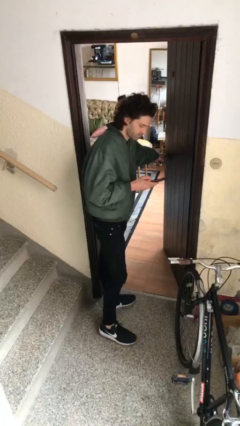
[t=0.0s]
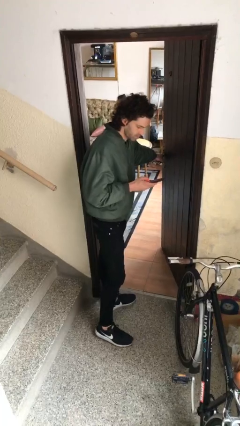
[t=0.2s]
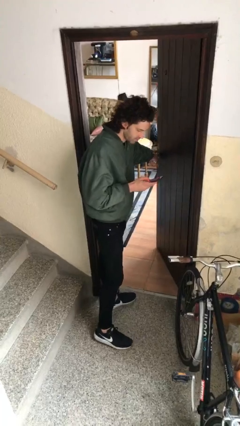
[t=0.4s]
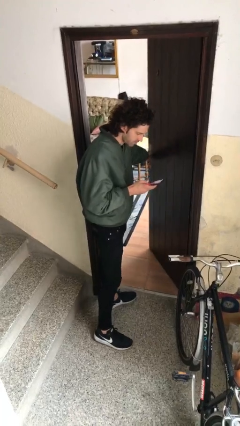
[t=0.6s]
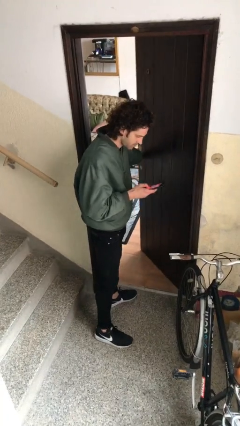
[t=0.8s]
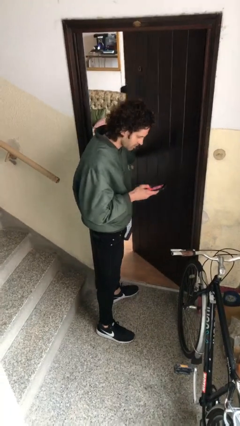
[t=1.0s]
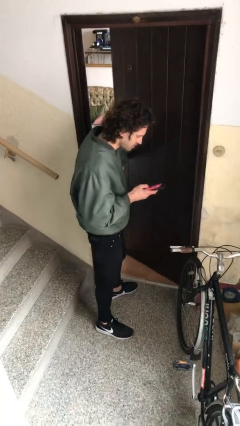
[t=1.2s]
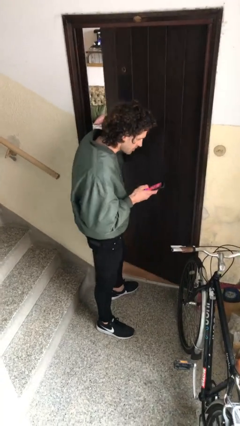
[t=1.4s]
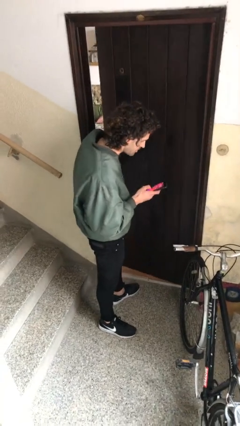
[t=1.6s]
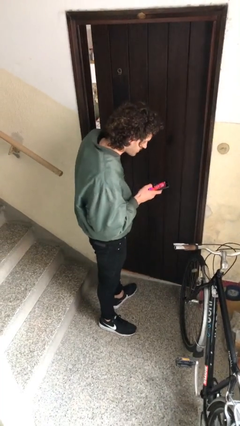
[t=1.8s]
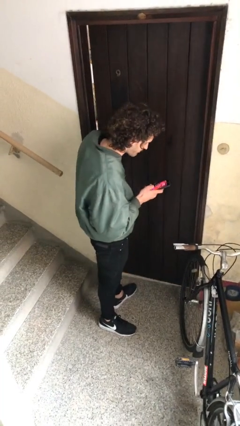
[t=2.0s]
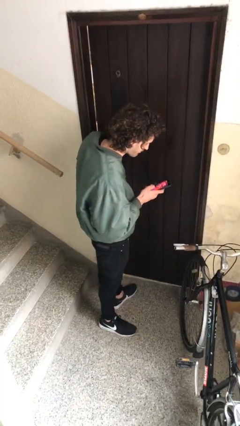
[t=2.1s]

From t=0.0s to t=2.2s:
person closes facility door

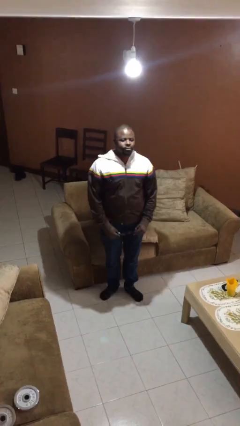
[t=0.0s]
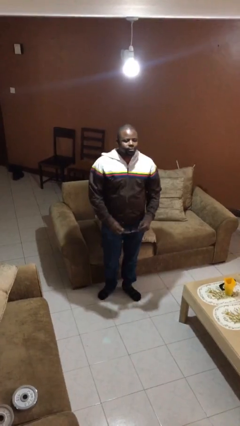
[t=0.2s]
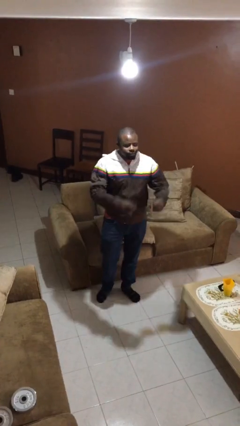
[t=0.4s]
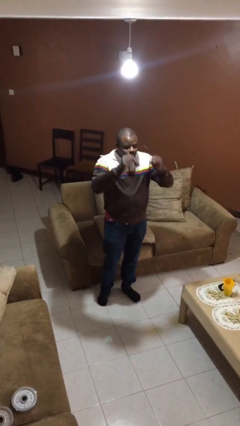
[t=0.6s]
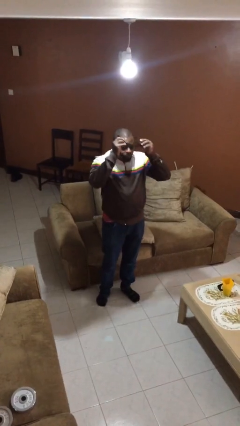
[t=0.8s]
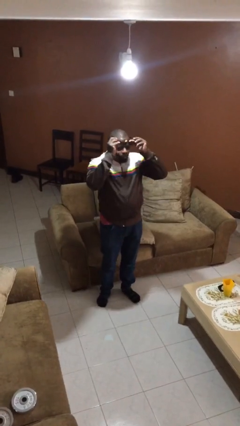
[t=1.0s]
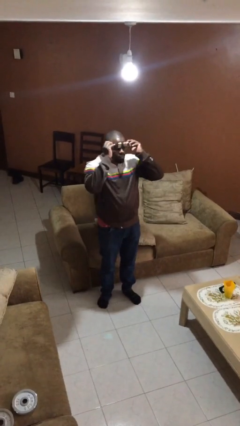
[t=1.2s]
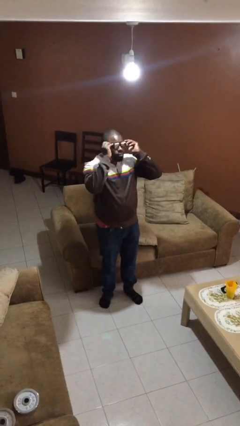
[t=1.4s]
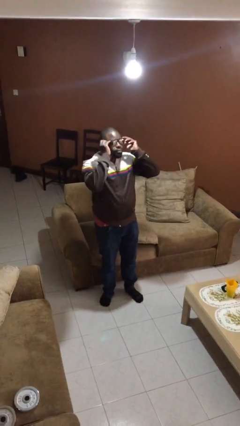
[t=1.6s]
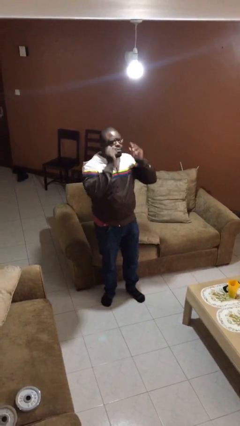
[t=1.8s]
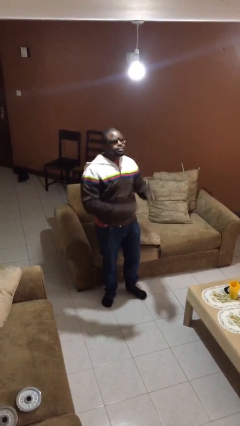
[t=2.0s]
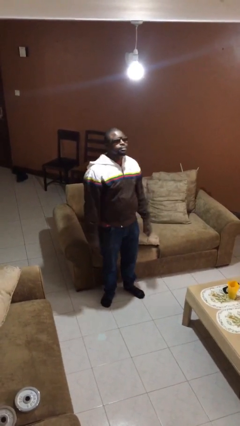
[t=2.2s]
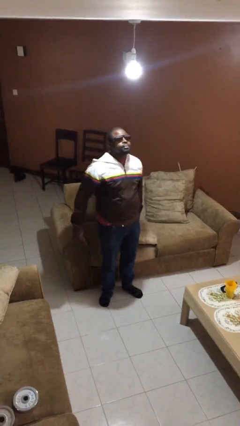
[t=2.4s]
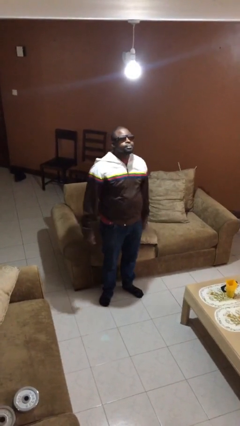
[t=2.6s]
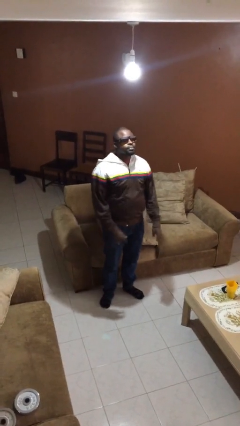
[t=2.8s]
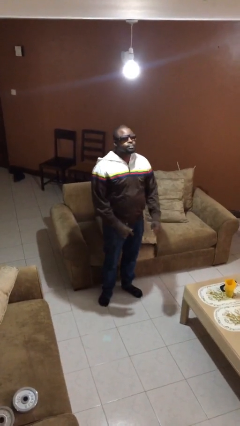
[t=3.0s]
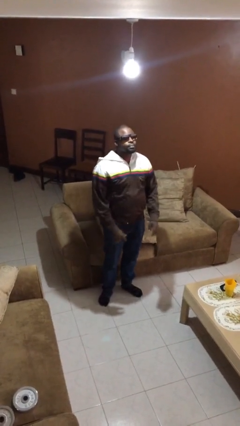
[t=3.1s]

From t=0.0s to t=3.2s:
person puts on sunglasses

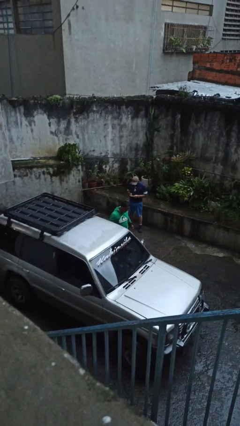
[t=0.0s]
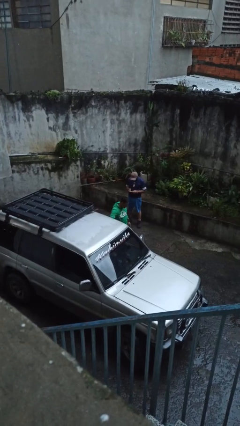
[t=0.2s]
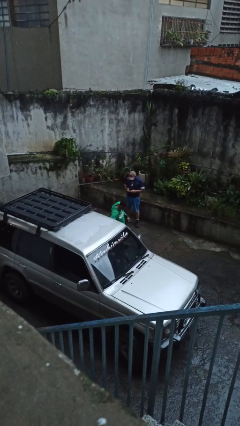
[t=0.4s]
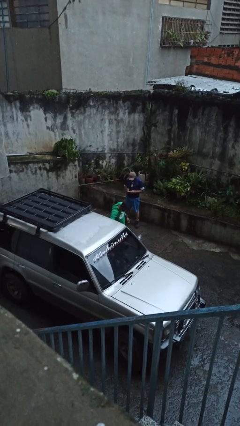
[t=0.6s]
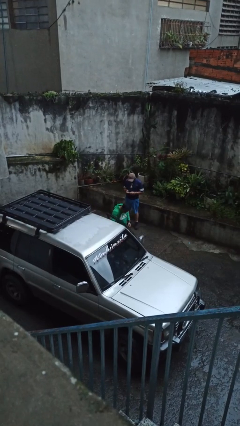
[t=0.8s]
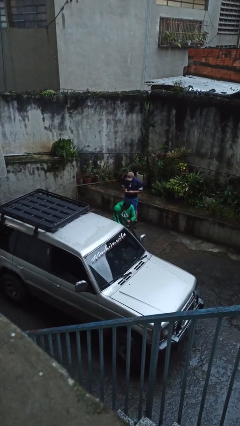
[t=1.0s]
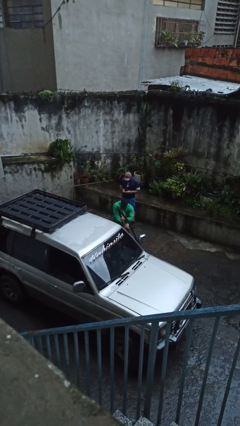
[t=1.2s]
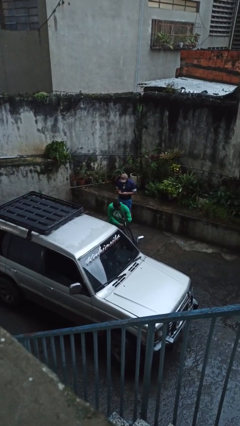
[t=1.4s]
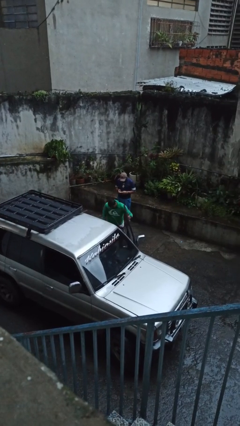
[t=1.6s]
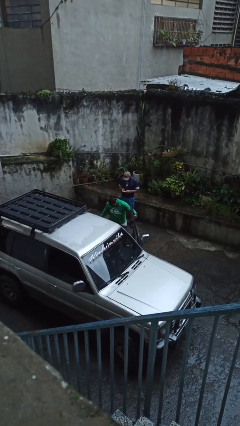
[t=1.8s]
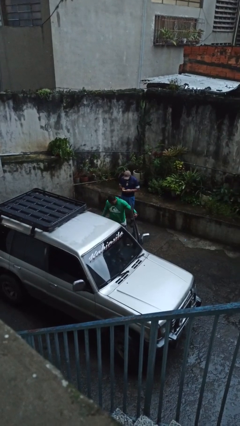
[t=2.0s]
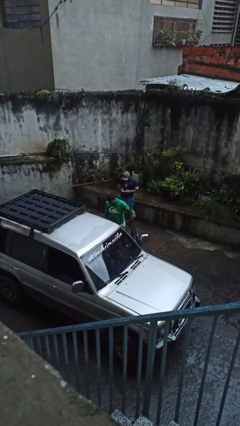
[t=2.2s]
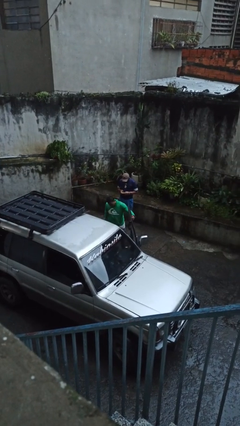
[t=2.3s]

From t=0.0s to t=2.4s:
person opens car door

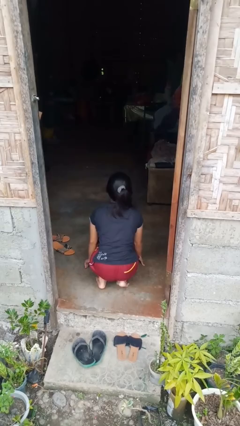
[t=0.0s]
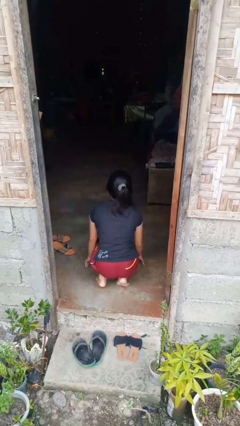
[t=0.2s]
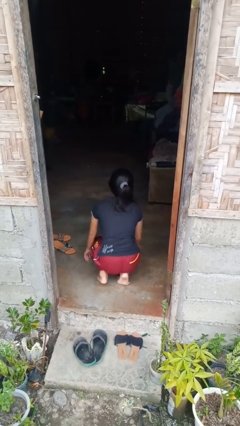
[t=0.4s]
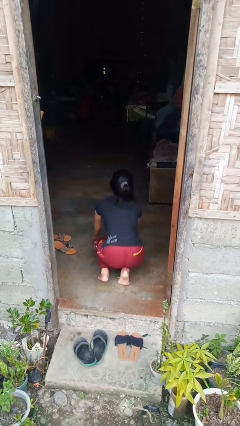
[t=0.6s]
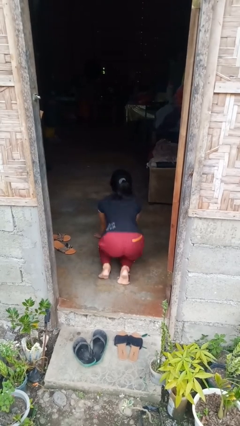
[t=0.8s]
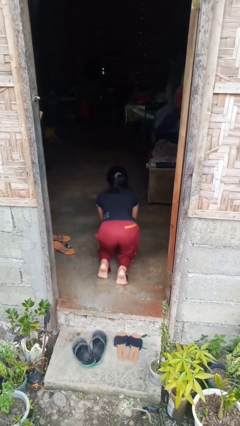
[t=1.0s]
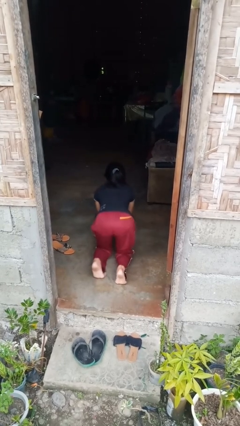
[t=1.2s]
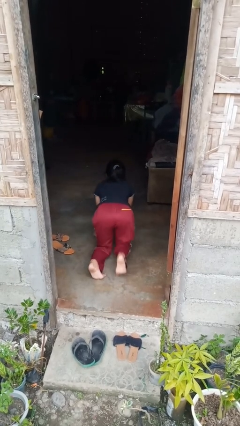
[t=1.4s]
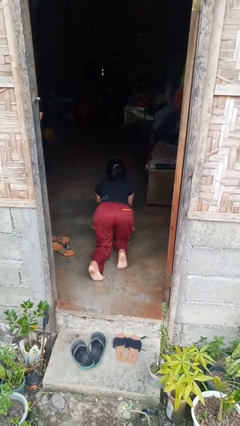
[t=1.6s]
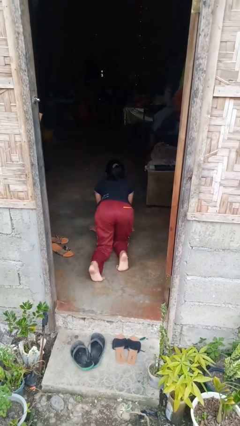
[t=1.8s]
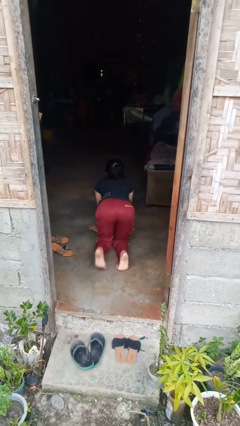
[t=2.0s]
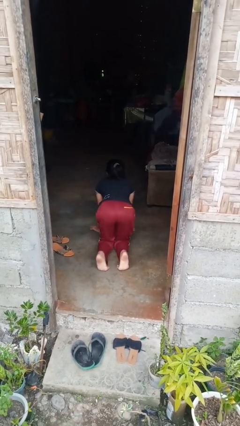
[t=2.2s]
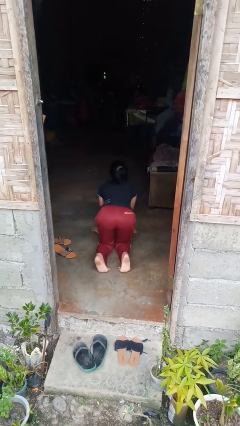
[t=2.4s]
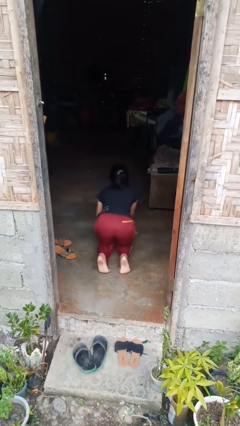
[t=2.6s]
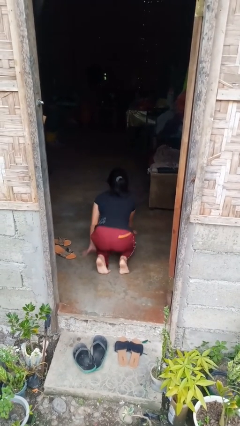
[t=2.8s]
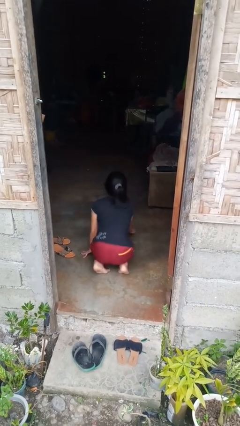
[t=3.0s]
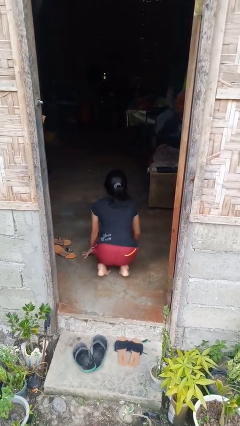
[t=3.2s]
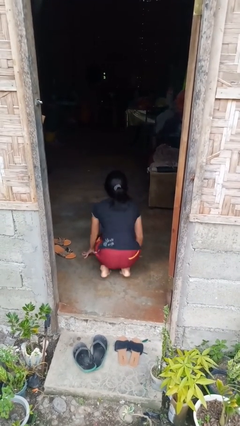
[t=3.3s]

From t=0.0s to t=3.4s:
person crawls

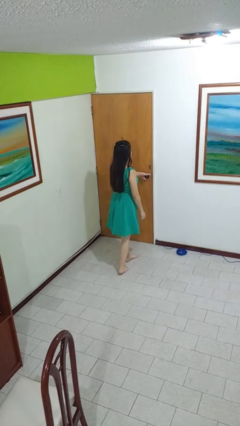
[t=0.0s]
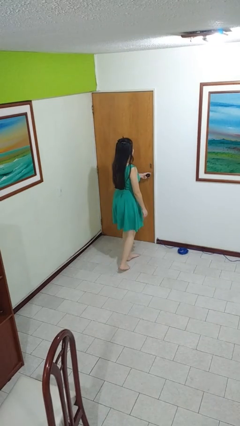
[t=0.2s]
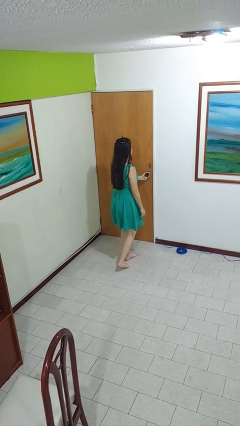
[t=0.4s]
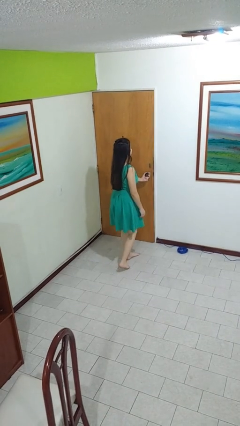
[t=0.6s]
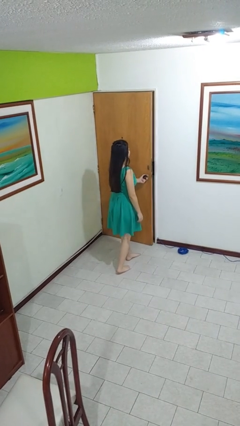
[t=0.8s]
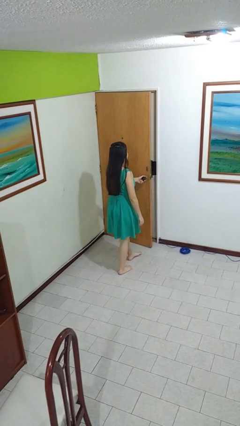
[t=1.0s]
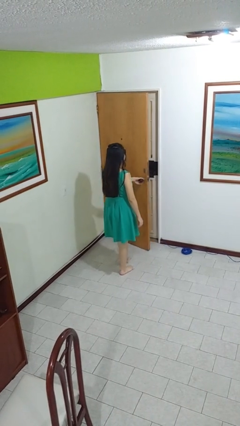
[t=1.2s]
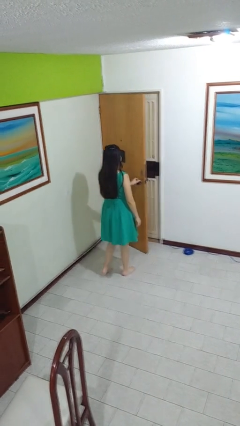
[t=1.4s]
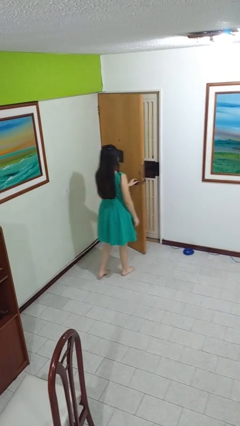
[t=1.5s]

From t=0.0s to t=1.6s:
person opens facility door

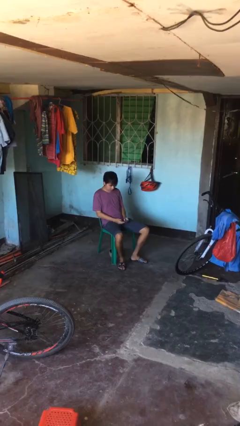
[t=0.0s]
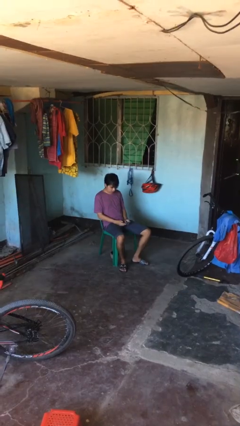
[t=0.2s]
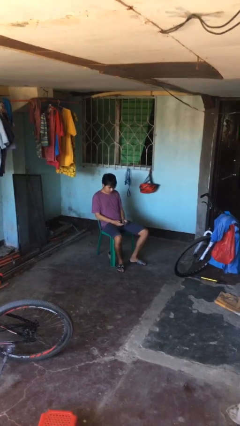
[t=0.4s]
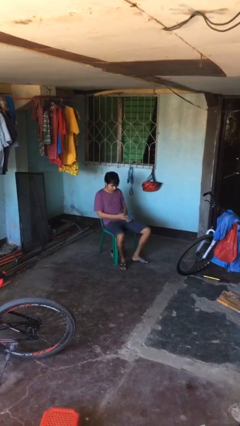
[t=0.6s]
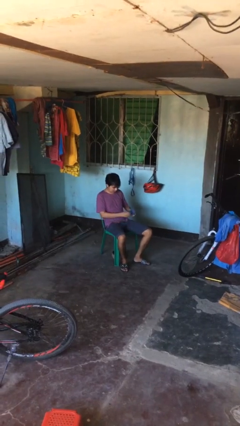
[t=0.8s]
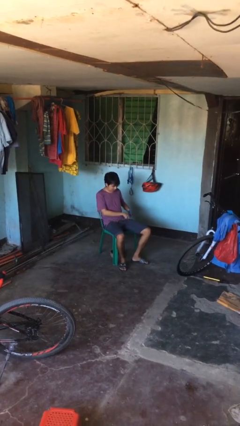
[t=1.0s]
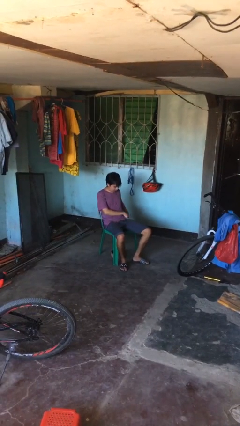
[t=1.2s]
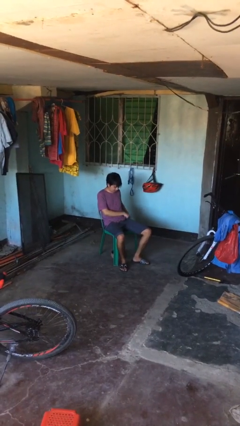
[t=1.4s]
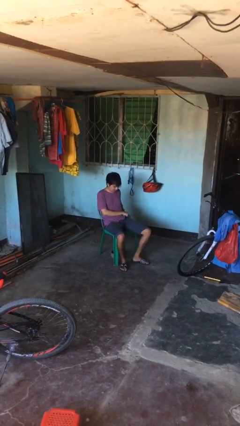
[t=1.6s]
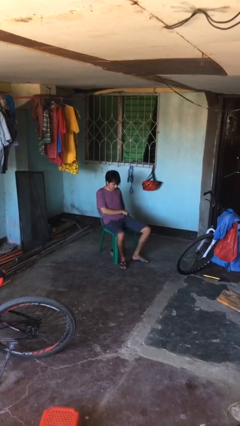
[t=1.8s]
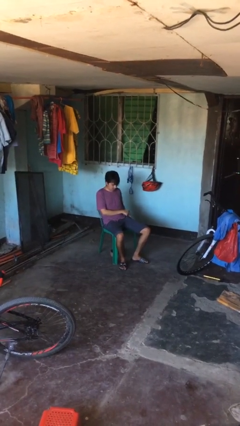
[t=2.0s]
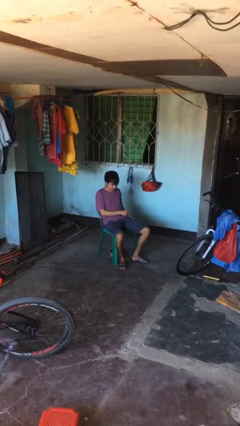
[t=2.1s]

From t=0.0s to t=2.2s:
person puts phone into pocket

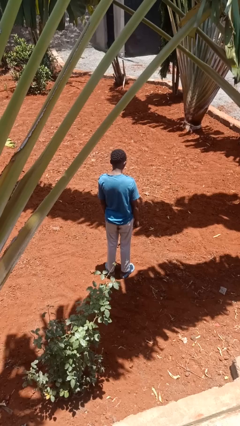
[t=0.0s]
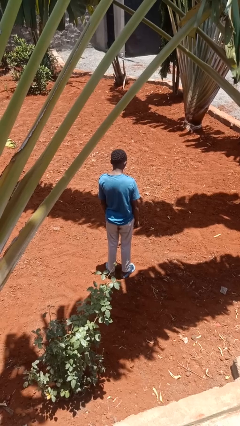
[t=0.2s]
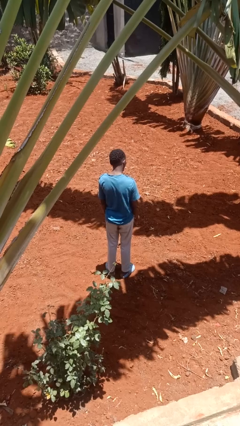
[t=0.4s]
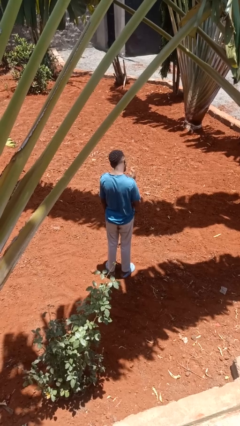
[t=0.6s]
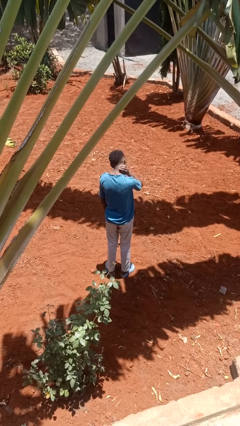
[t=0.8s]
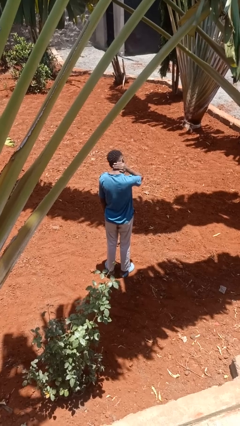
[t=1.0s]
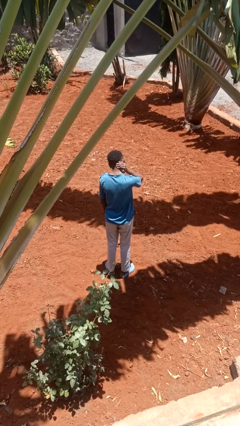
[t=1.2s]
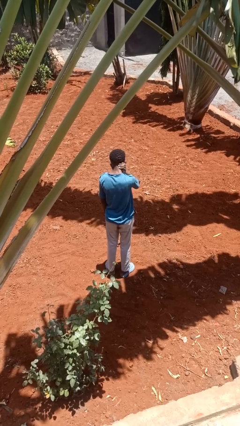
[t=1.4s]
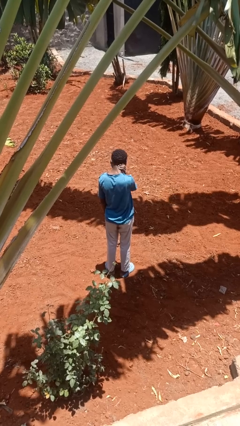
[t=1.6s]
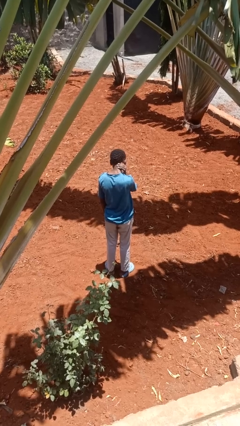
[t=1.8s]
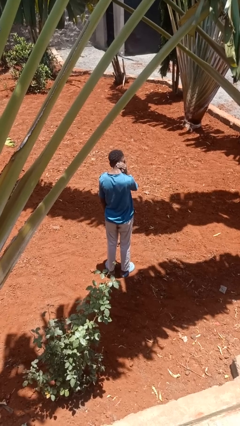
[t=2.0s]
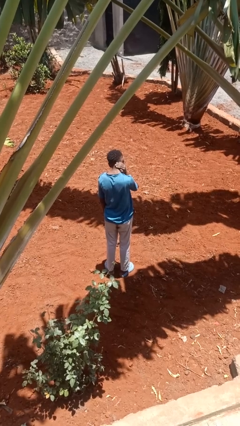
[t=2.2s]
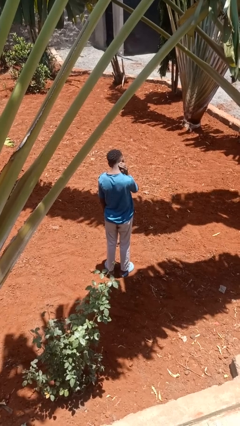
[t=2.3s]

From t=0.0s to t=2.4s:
person rubs neck
